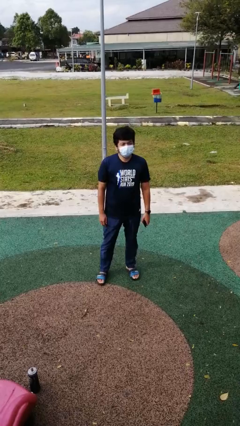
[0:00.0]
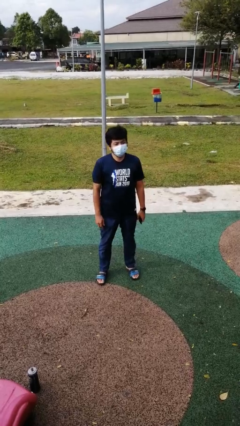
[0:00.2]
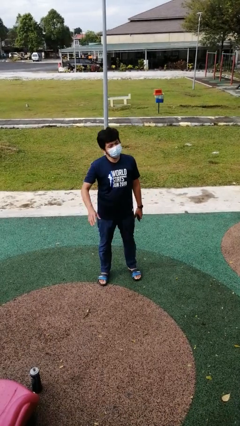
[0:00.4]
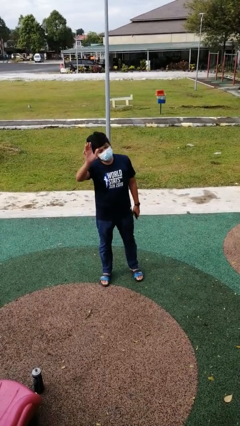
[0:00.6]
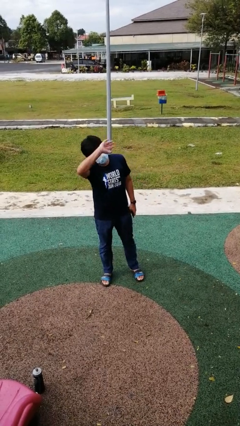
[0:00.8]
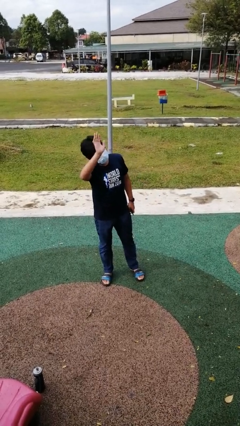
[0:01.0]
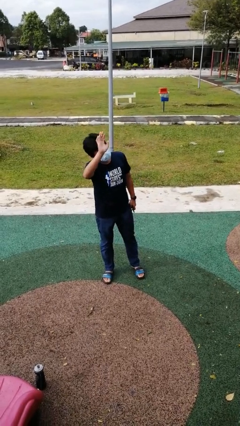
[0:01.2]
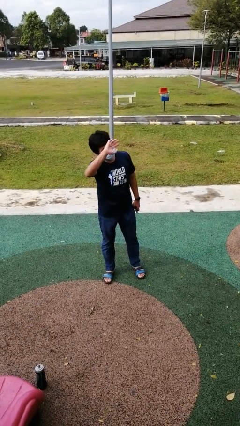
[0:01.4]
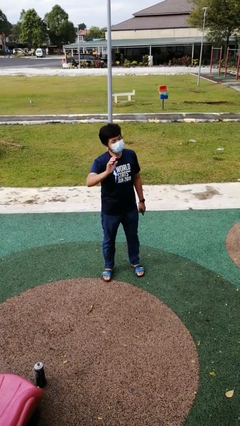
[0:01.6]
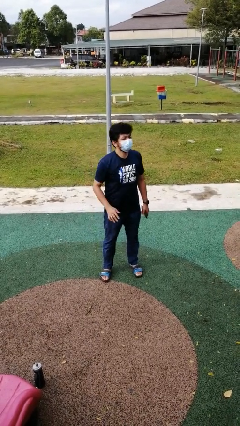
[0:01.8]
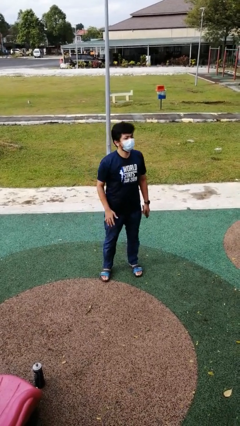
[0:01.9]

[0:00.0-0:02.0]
person waves at person

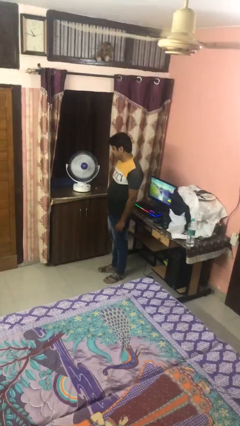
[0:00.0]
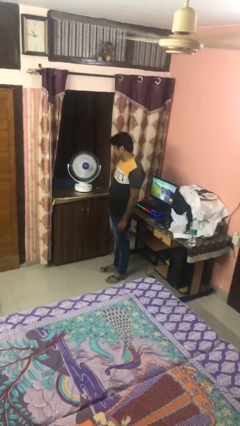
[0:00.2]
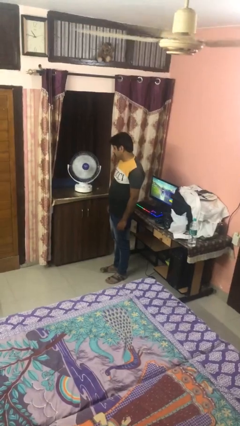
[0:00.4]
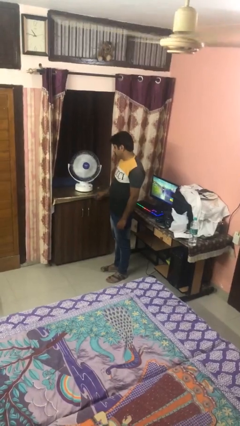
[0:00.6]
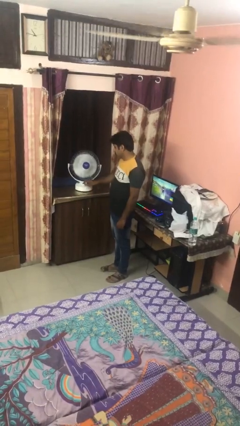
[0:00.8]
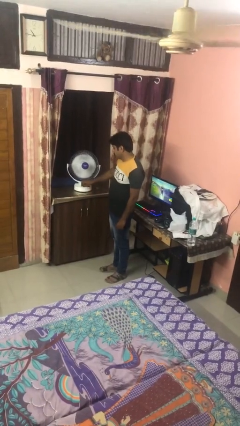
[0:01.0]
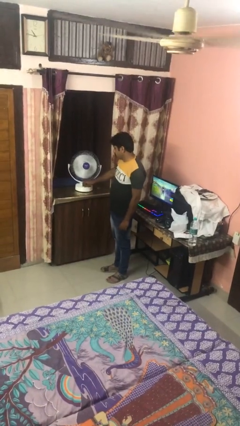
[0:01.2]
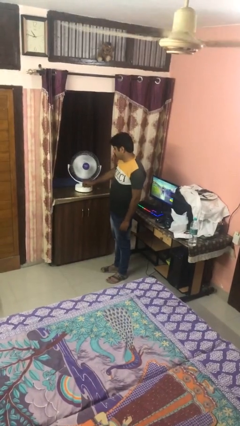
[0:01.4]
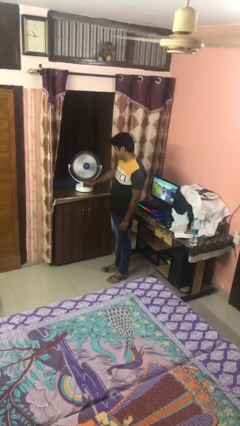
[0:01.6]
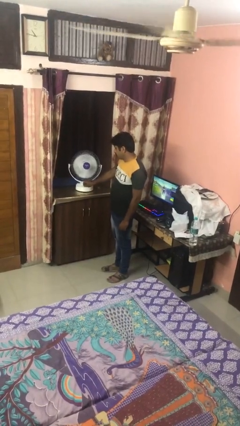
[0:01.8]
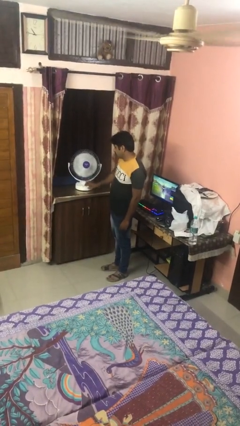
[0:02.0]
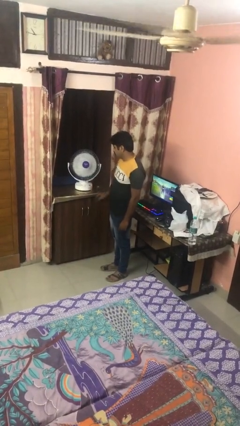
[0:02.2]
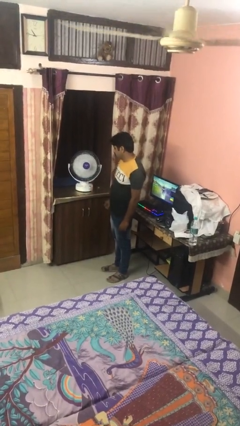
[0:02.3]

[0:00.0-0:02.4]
person turns on fan

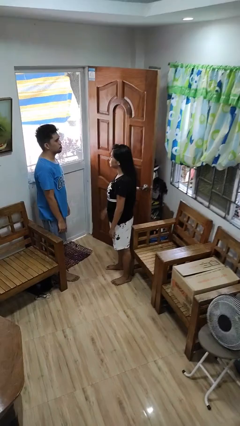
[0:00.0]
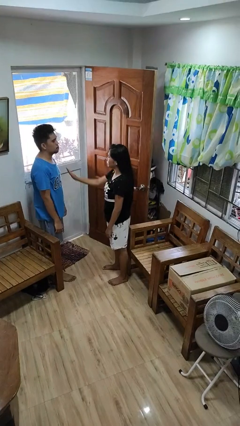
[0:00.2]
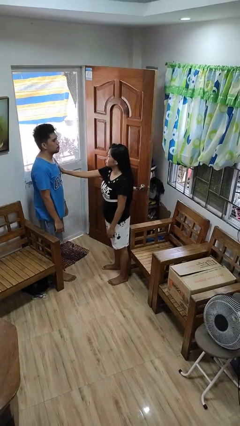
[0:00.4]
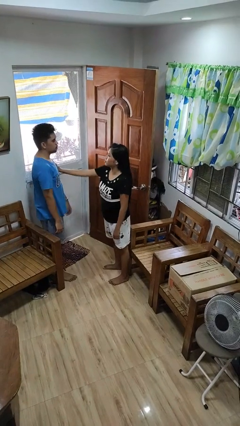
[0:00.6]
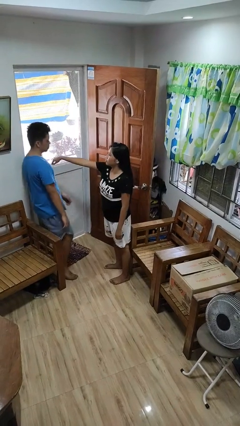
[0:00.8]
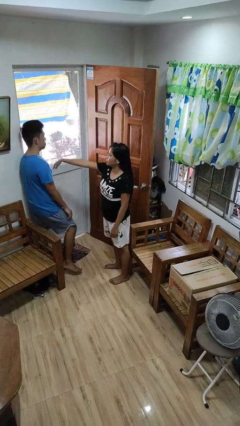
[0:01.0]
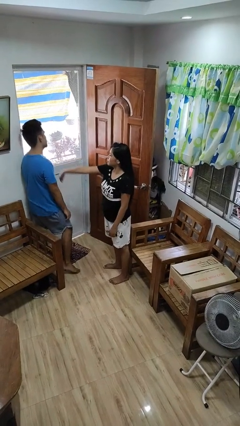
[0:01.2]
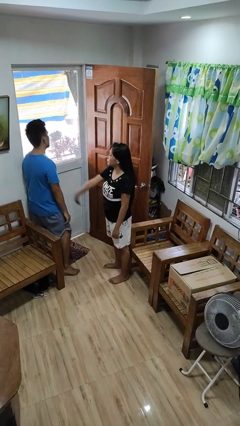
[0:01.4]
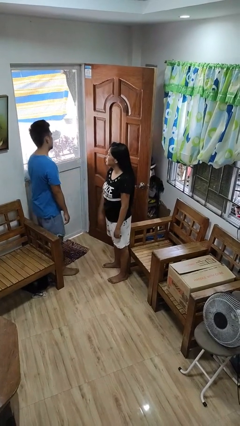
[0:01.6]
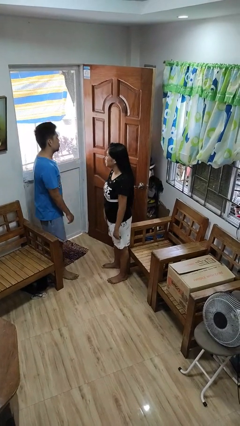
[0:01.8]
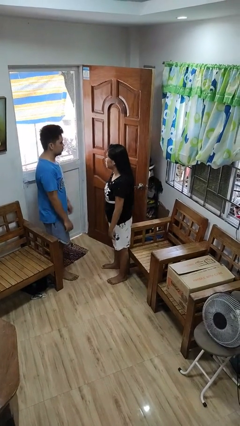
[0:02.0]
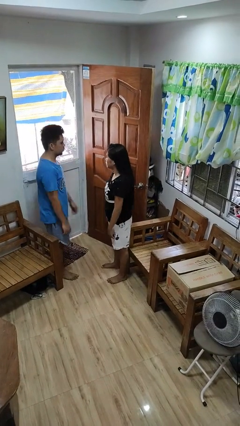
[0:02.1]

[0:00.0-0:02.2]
person shoves person

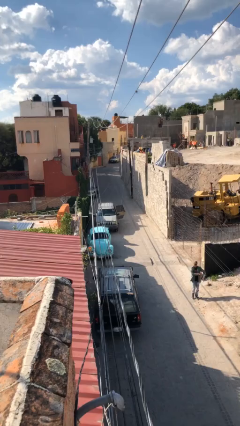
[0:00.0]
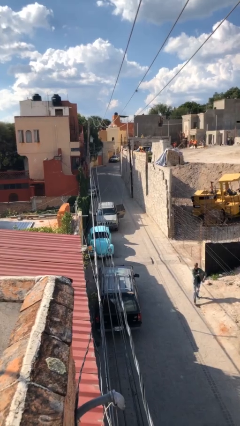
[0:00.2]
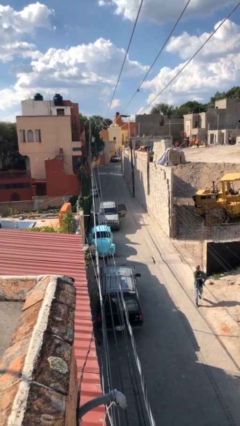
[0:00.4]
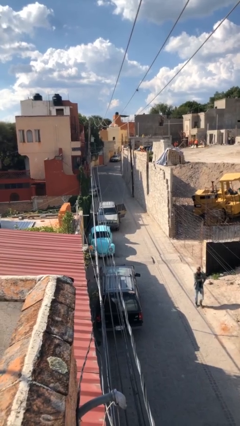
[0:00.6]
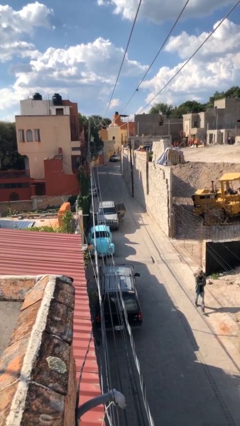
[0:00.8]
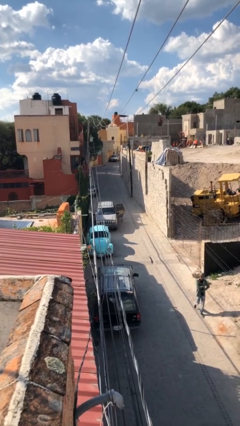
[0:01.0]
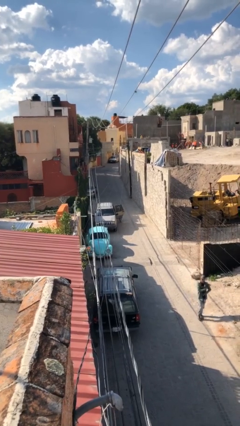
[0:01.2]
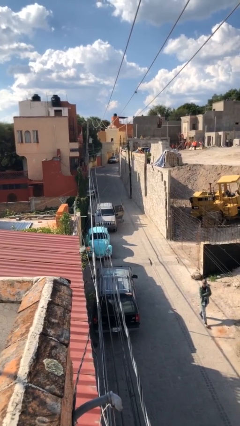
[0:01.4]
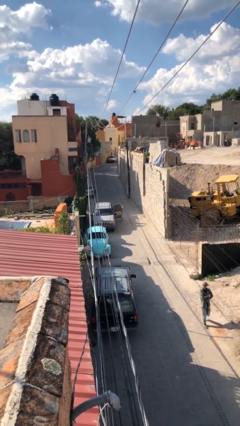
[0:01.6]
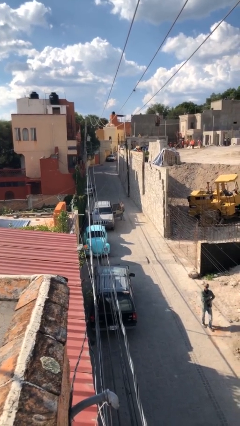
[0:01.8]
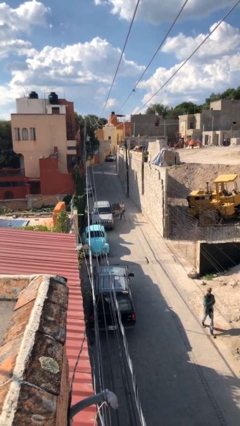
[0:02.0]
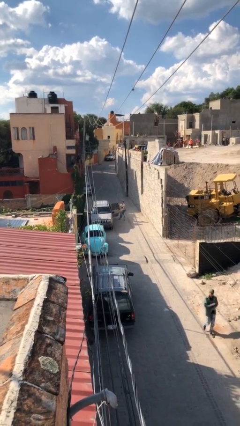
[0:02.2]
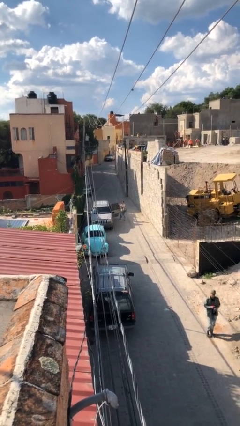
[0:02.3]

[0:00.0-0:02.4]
person unloads car

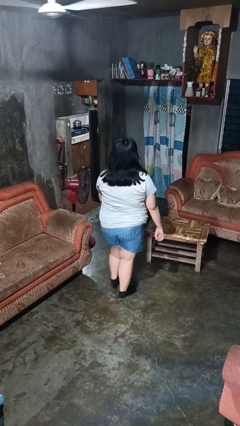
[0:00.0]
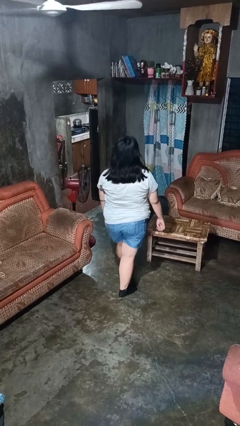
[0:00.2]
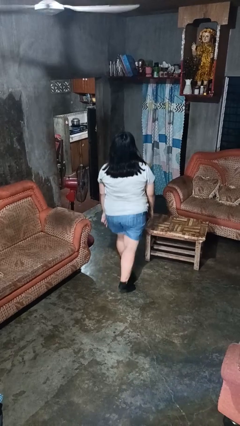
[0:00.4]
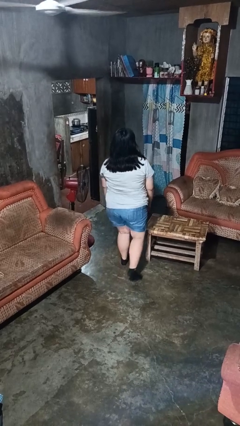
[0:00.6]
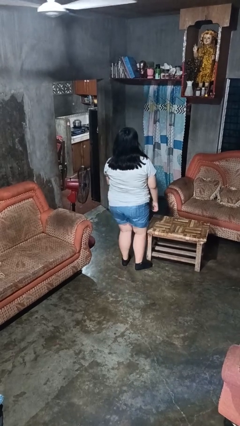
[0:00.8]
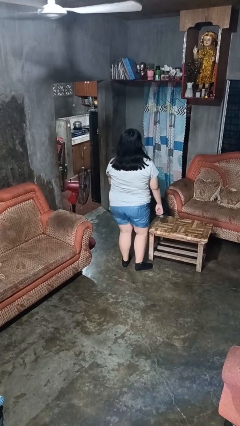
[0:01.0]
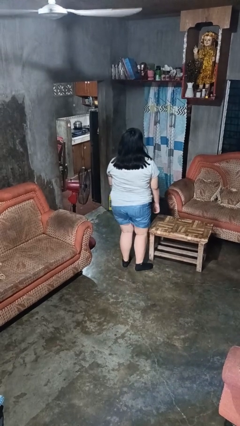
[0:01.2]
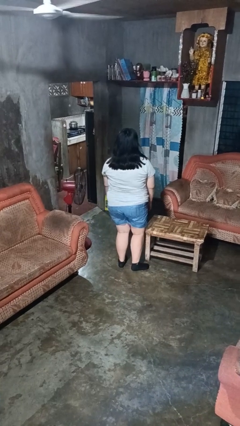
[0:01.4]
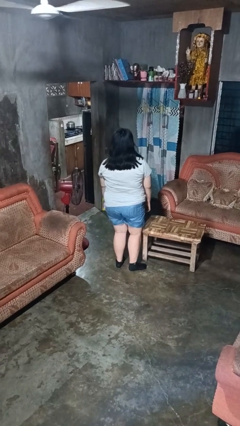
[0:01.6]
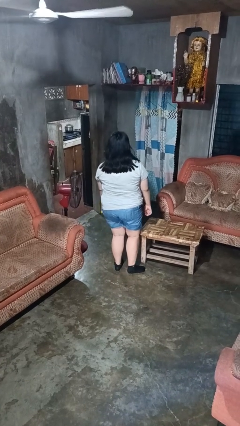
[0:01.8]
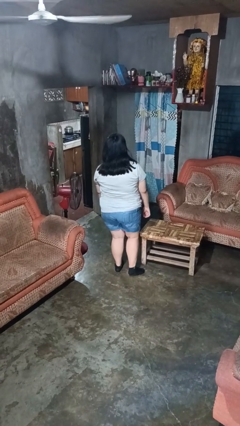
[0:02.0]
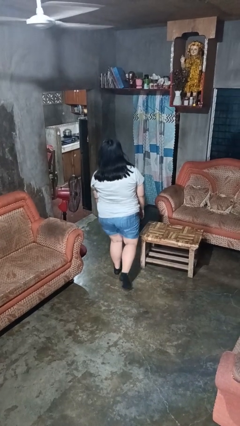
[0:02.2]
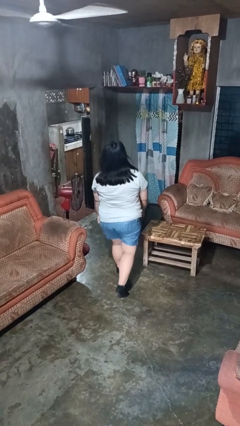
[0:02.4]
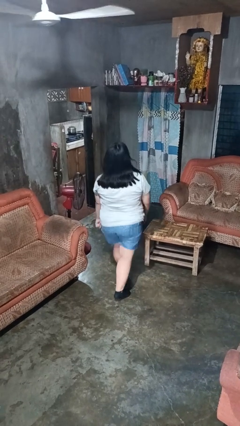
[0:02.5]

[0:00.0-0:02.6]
person bumps into table

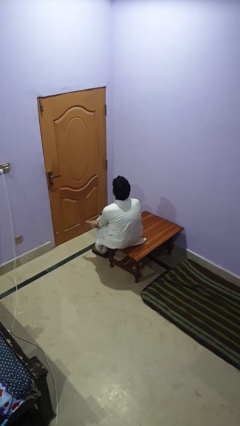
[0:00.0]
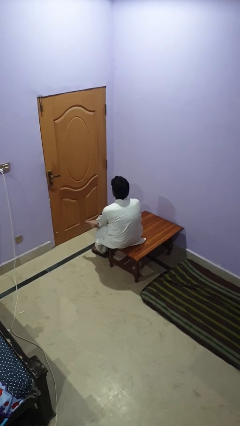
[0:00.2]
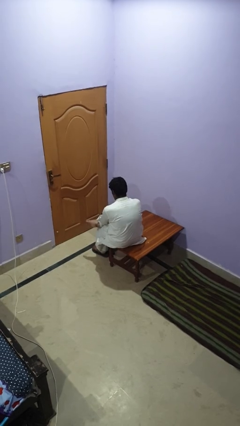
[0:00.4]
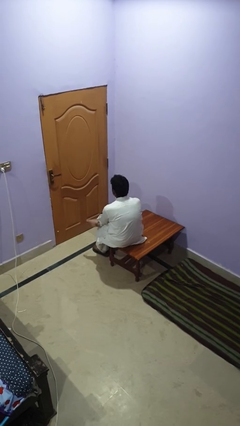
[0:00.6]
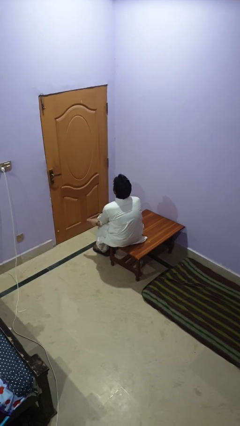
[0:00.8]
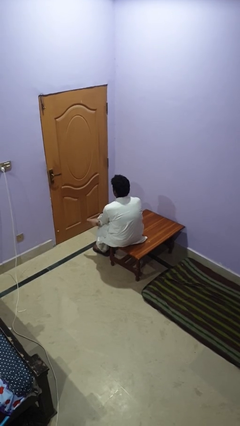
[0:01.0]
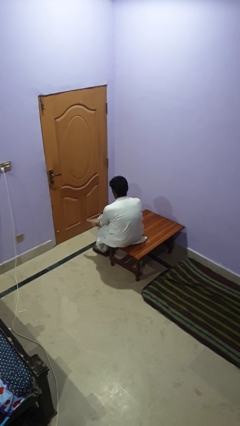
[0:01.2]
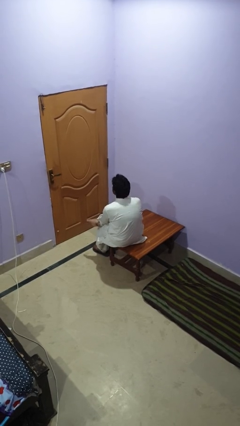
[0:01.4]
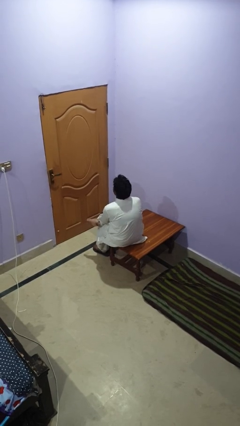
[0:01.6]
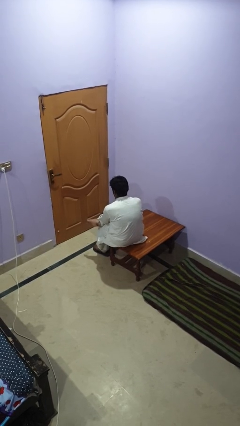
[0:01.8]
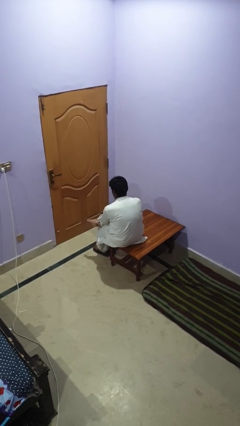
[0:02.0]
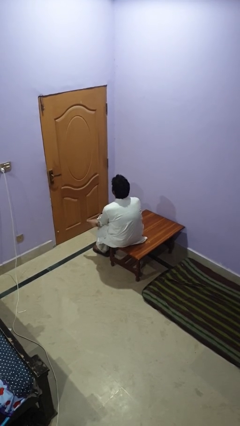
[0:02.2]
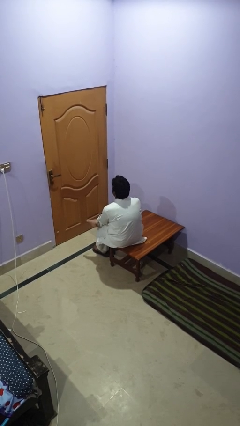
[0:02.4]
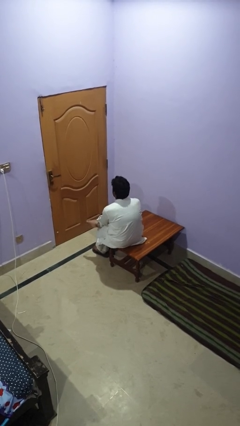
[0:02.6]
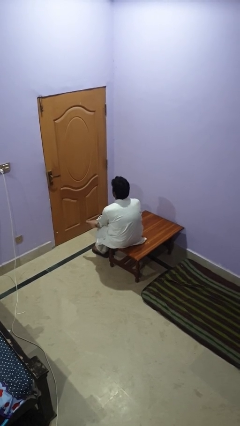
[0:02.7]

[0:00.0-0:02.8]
person nods head

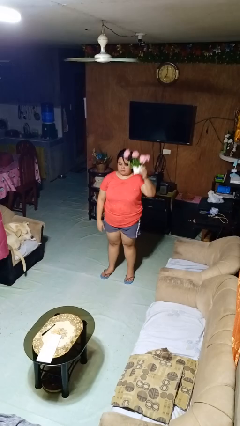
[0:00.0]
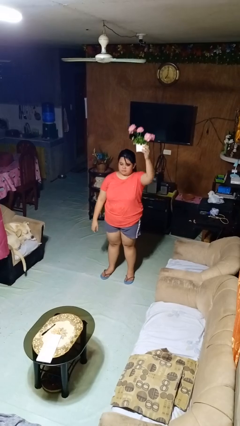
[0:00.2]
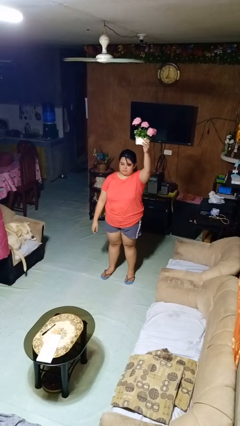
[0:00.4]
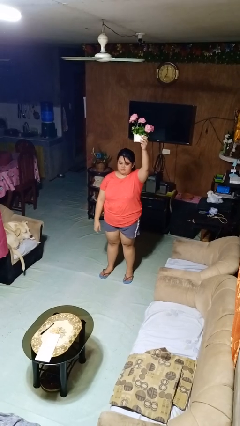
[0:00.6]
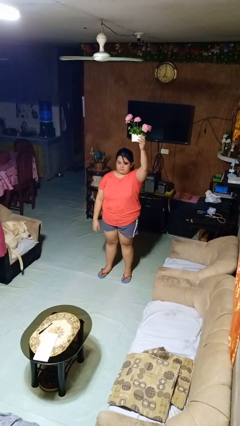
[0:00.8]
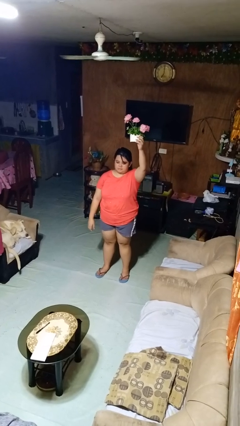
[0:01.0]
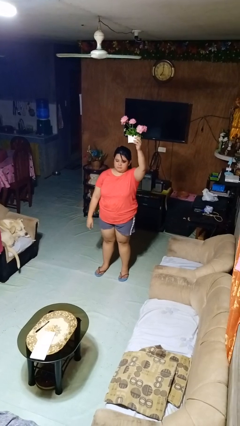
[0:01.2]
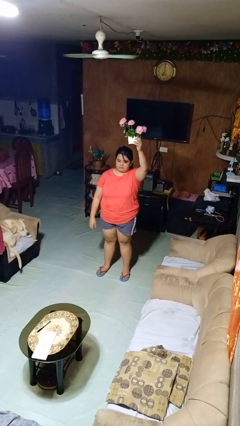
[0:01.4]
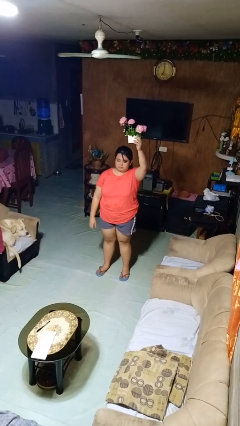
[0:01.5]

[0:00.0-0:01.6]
person holds object above head

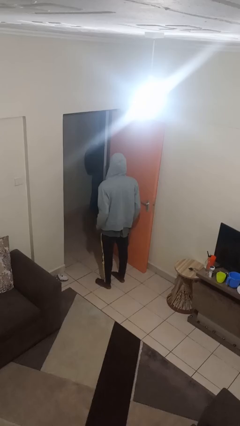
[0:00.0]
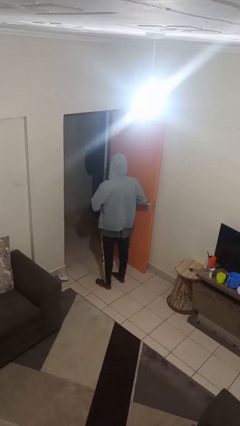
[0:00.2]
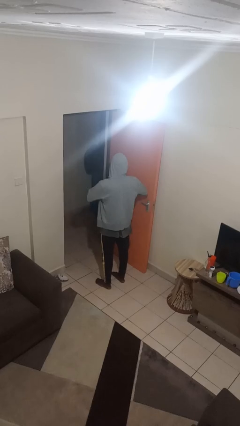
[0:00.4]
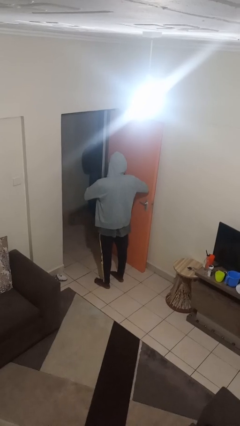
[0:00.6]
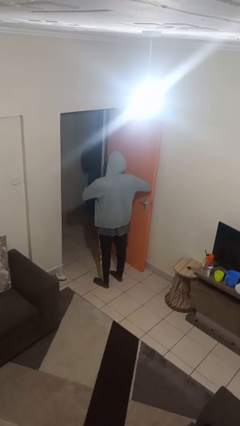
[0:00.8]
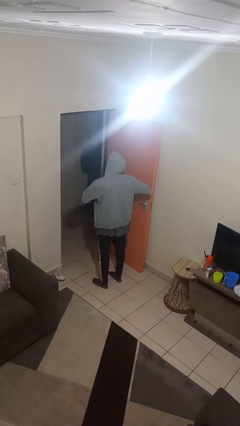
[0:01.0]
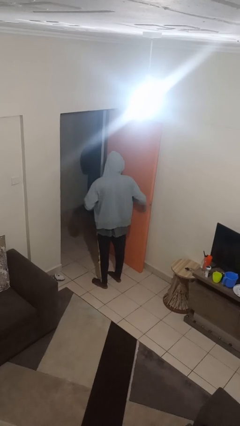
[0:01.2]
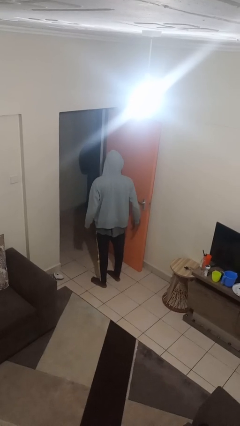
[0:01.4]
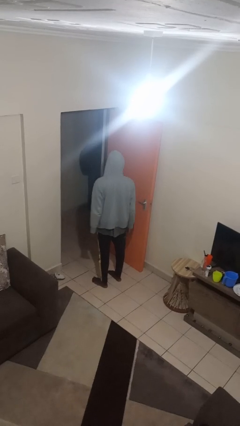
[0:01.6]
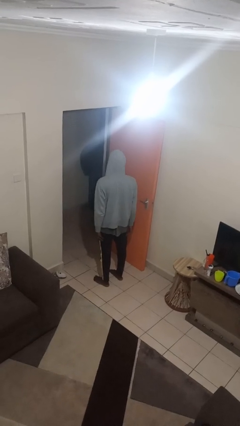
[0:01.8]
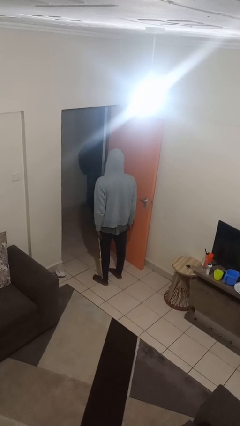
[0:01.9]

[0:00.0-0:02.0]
person takes off ring
